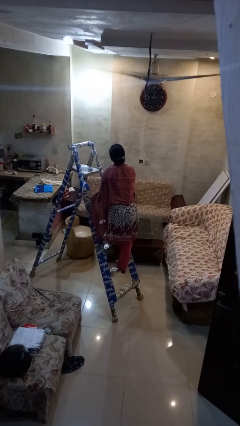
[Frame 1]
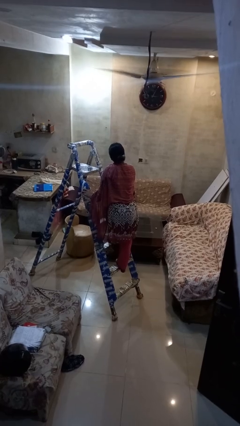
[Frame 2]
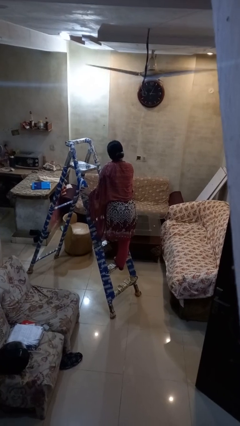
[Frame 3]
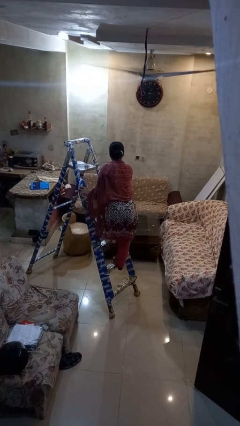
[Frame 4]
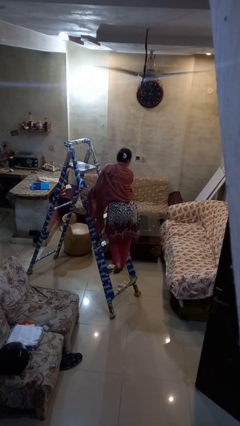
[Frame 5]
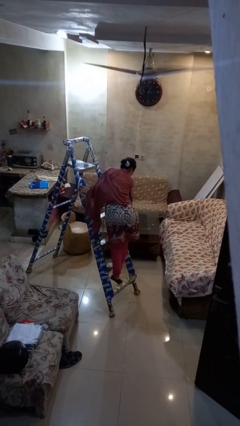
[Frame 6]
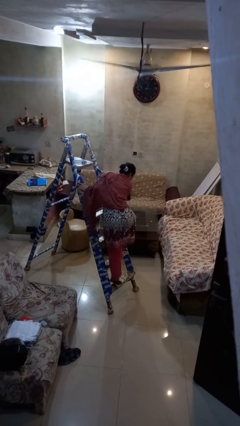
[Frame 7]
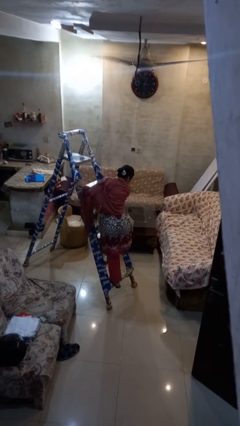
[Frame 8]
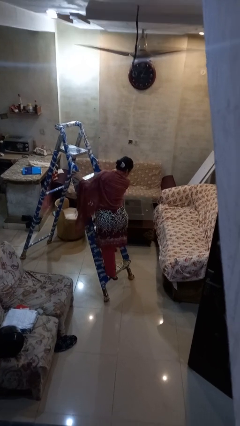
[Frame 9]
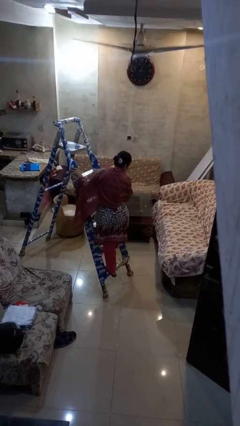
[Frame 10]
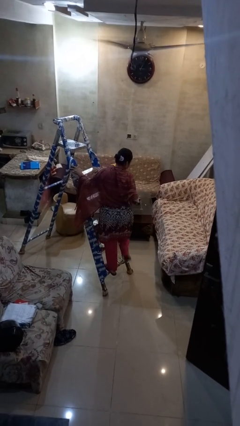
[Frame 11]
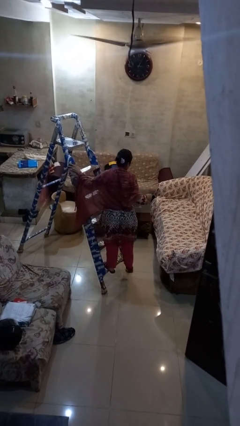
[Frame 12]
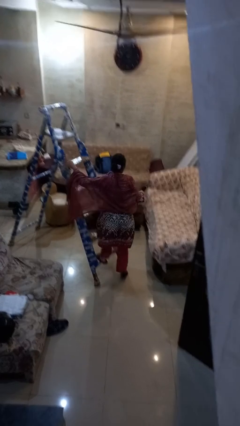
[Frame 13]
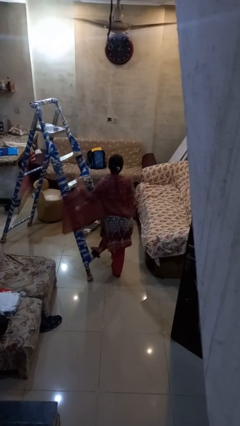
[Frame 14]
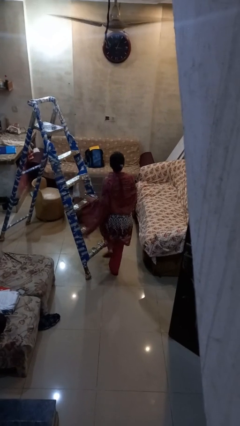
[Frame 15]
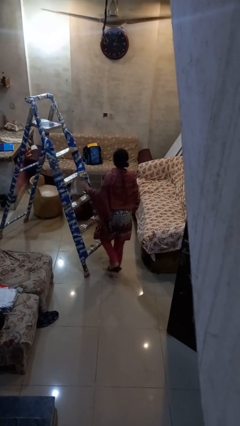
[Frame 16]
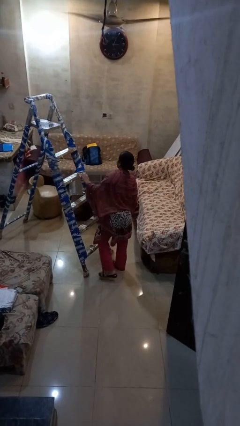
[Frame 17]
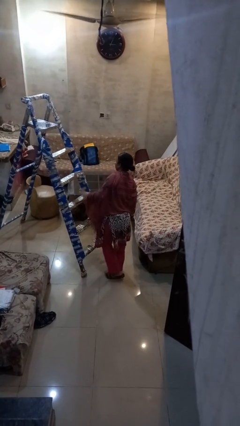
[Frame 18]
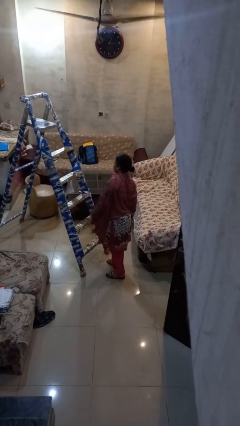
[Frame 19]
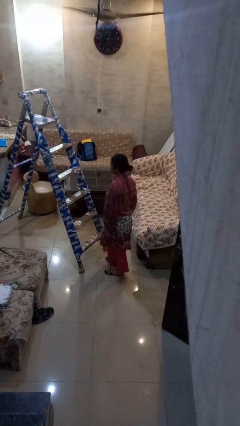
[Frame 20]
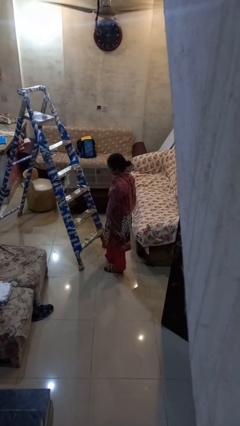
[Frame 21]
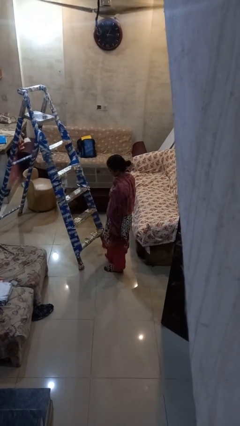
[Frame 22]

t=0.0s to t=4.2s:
person climbs down ladder

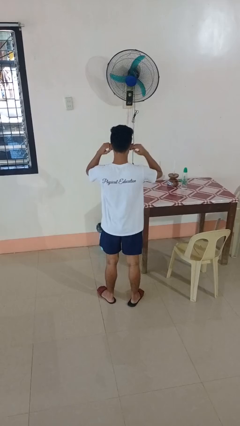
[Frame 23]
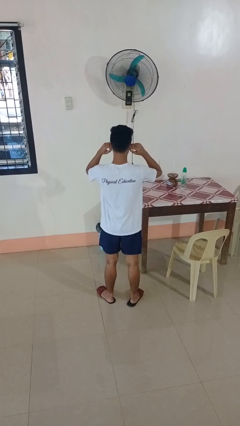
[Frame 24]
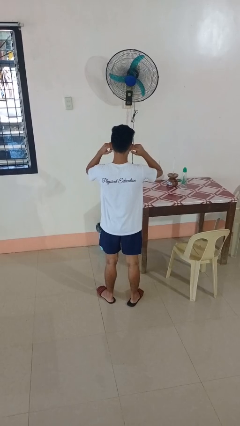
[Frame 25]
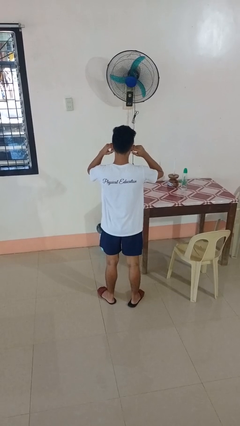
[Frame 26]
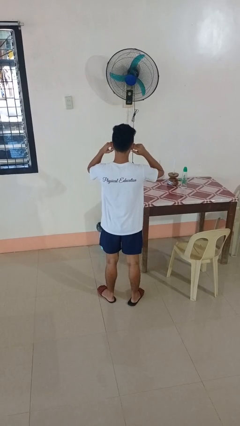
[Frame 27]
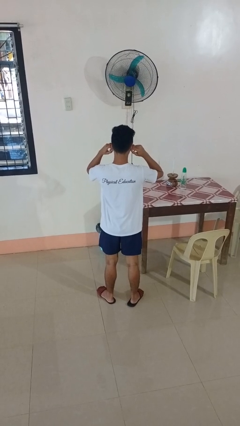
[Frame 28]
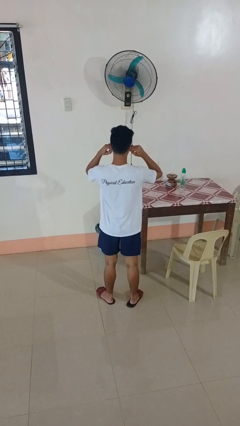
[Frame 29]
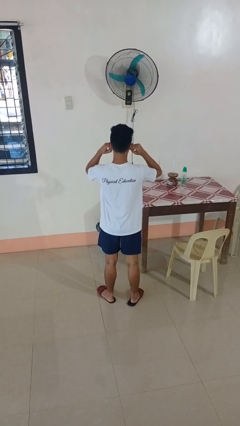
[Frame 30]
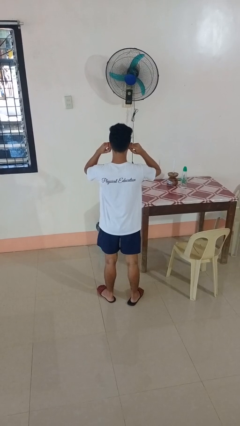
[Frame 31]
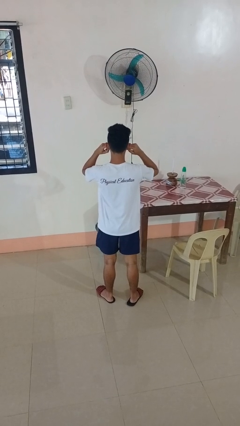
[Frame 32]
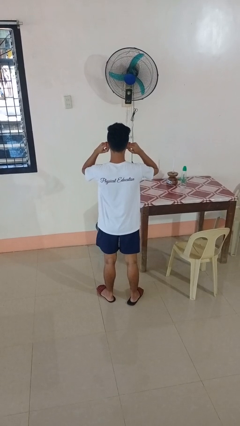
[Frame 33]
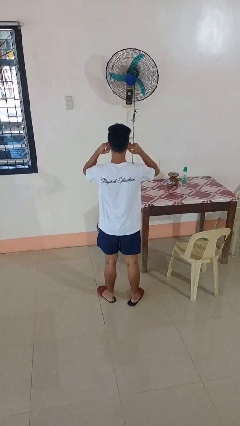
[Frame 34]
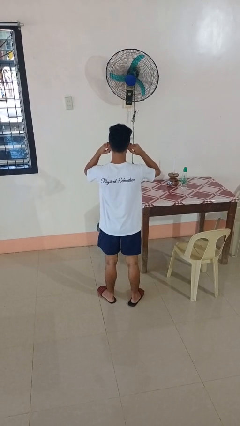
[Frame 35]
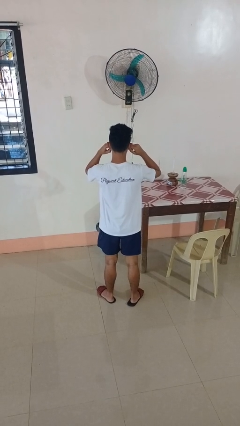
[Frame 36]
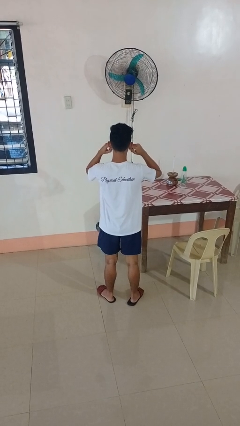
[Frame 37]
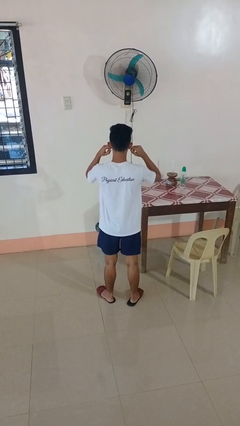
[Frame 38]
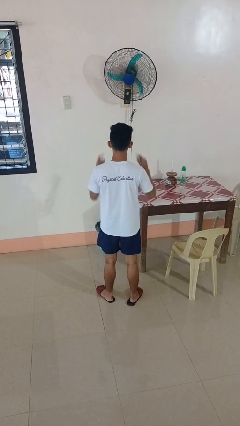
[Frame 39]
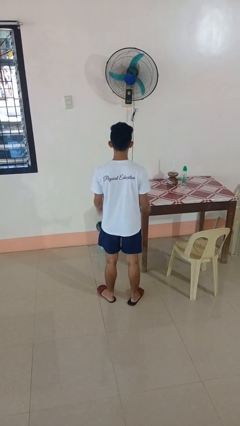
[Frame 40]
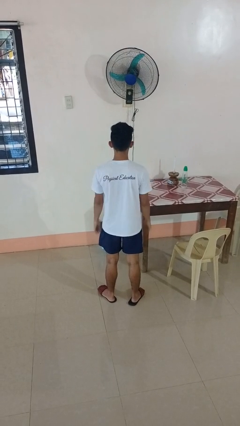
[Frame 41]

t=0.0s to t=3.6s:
person puts fingers in ear

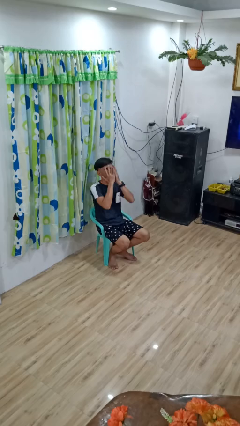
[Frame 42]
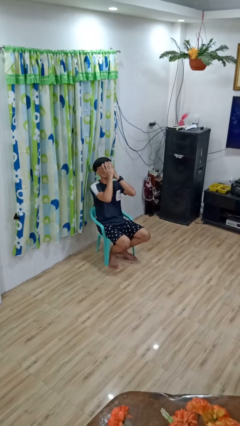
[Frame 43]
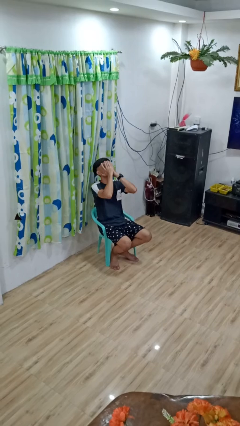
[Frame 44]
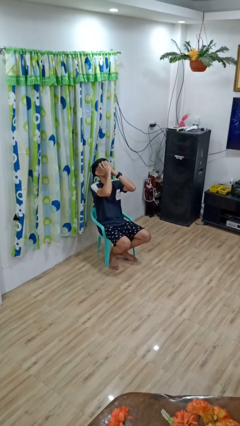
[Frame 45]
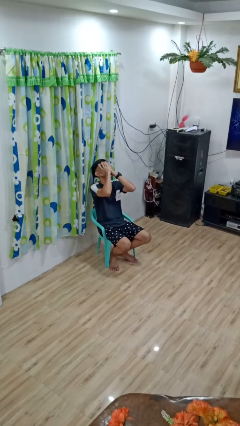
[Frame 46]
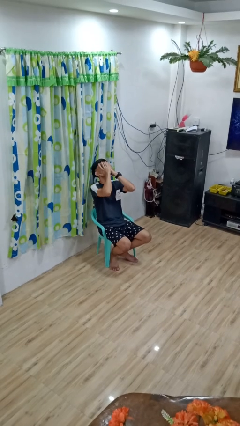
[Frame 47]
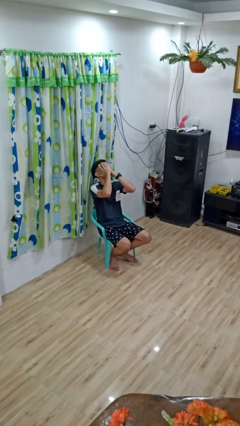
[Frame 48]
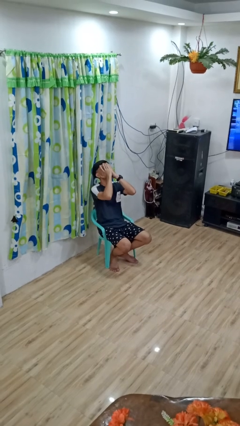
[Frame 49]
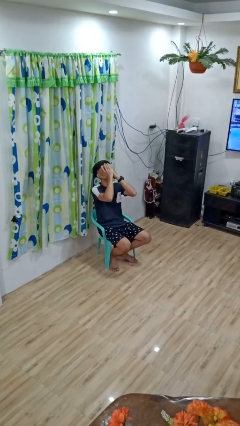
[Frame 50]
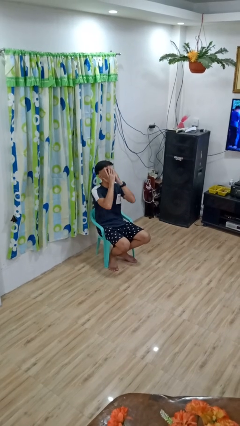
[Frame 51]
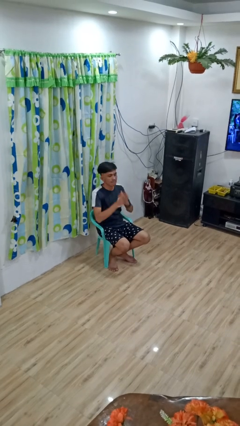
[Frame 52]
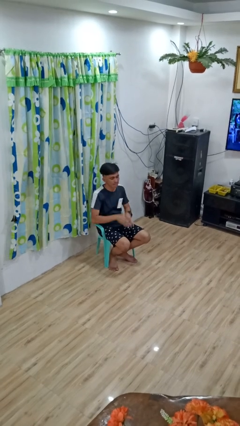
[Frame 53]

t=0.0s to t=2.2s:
person covers face with hands

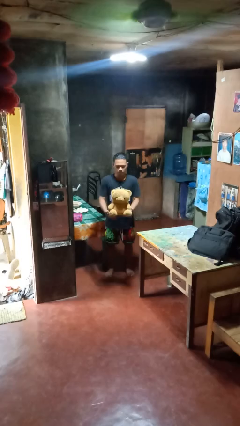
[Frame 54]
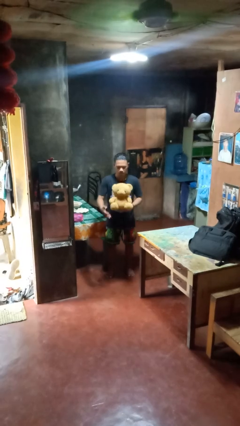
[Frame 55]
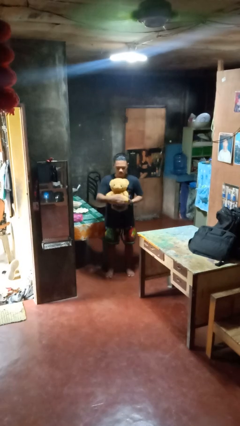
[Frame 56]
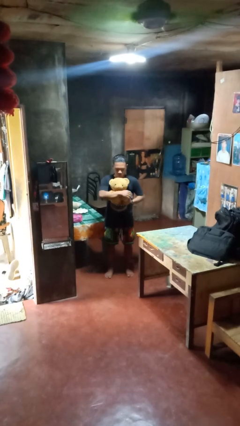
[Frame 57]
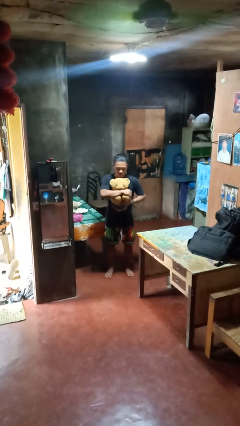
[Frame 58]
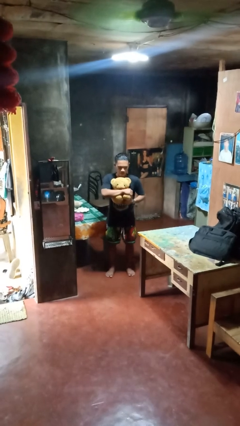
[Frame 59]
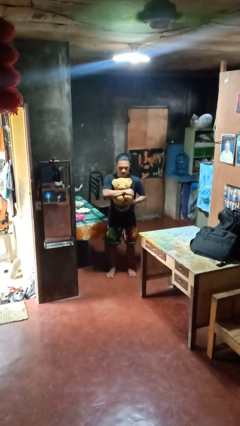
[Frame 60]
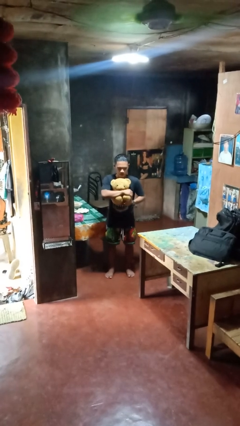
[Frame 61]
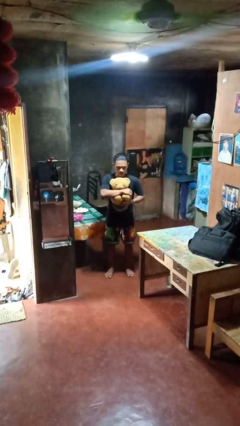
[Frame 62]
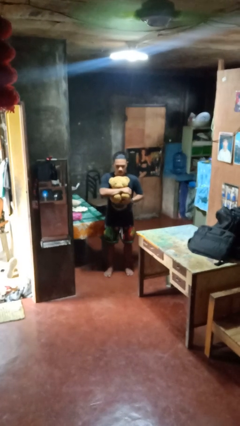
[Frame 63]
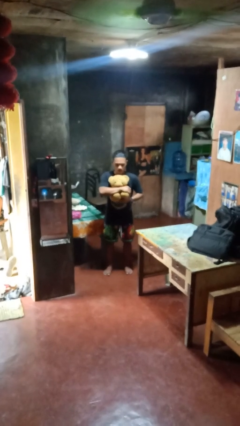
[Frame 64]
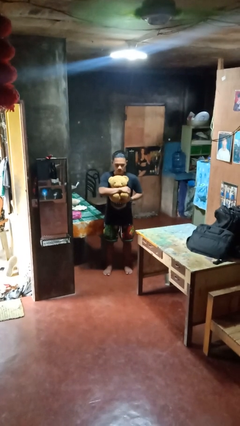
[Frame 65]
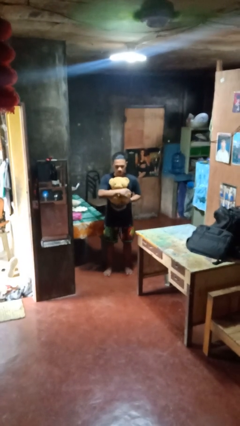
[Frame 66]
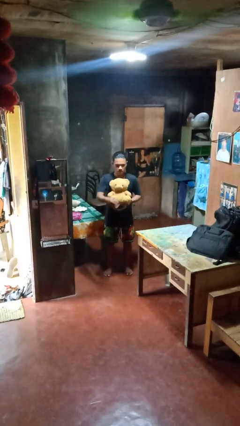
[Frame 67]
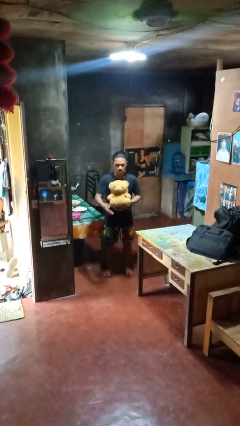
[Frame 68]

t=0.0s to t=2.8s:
person hugs stuffed animal

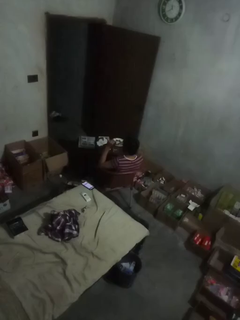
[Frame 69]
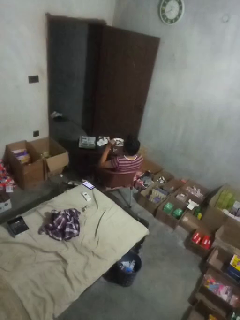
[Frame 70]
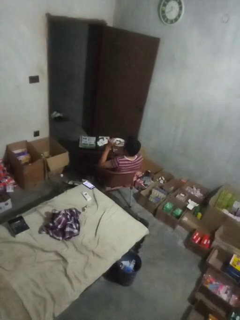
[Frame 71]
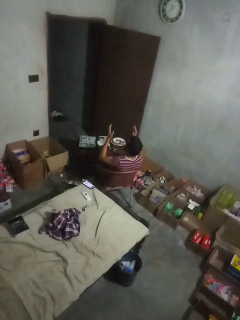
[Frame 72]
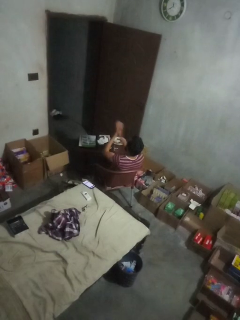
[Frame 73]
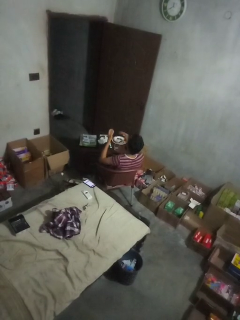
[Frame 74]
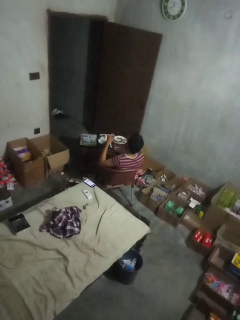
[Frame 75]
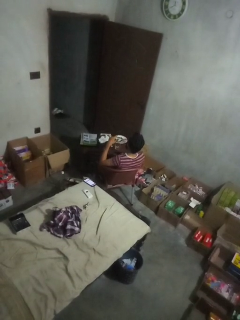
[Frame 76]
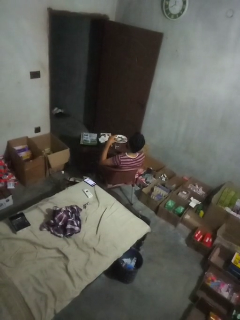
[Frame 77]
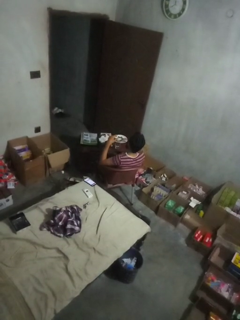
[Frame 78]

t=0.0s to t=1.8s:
person claps hands

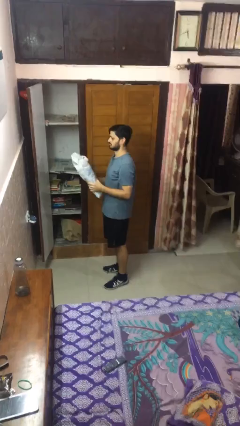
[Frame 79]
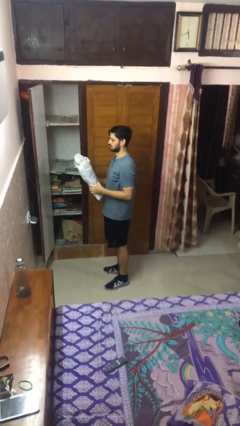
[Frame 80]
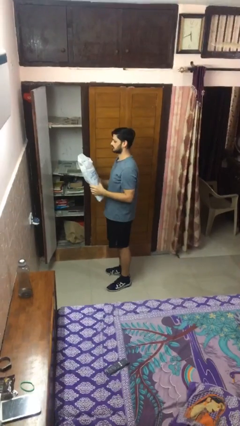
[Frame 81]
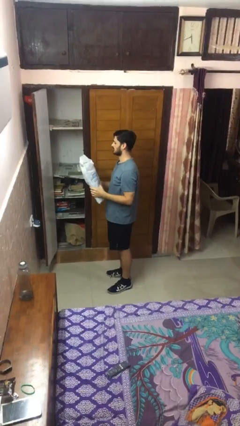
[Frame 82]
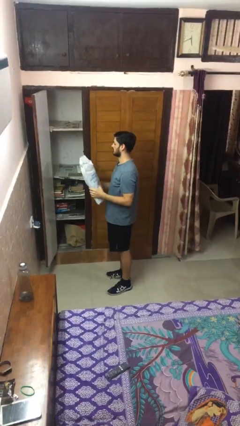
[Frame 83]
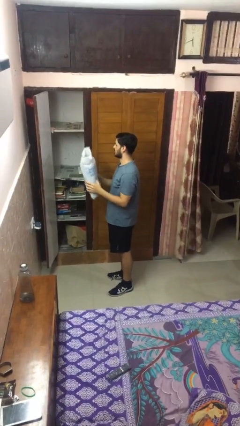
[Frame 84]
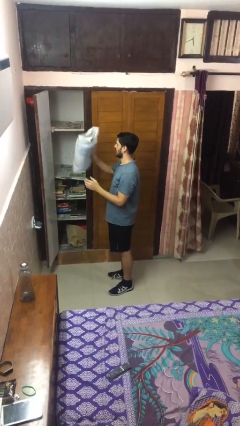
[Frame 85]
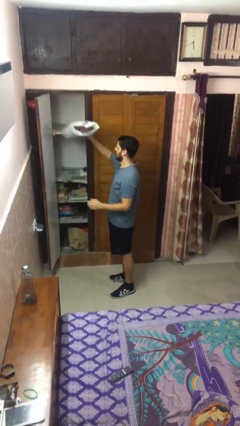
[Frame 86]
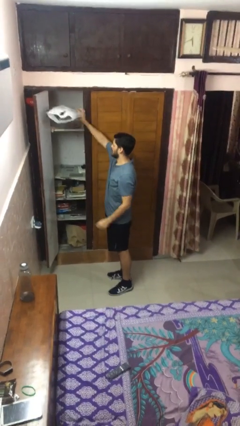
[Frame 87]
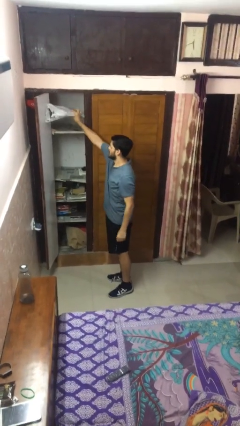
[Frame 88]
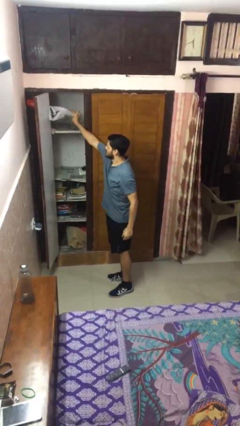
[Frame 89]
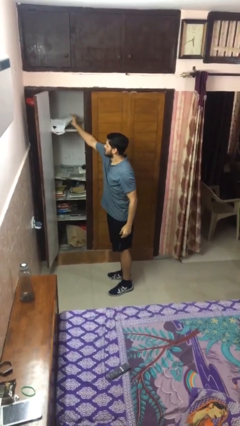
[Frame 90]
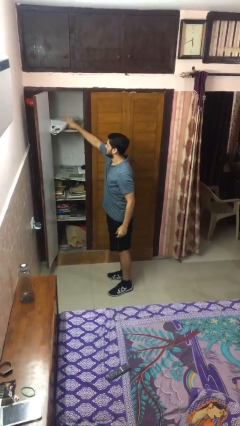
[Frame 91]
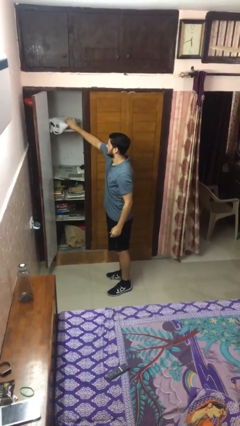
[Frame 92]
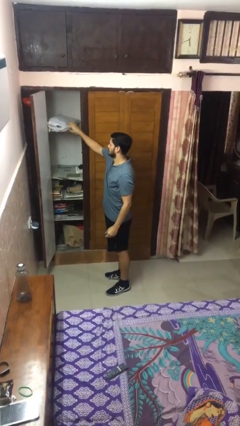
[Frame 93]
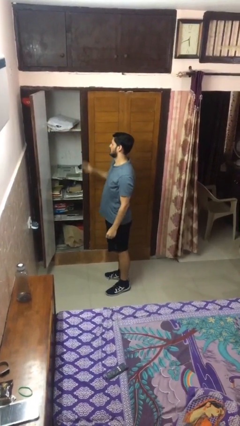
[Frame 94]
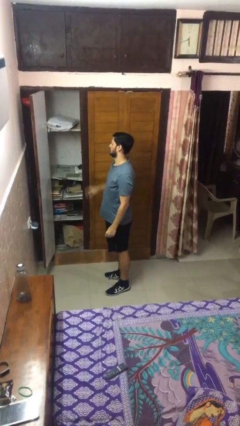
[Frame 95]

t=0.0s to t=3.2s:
person puts down object on shelf

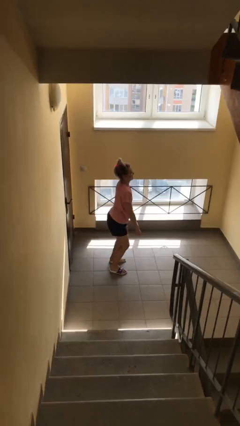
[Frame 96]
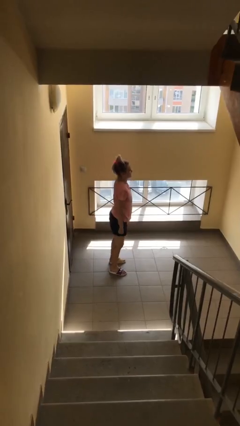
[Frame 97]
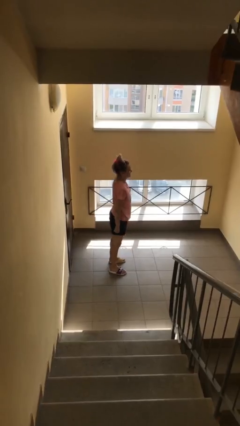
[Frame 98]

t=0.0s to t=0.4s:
person stands up

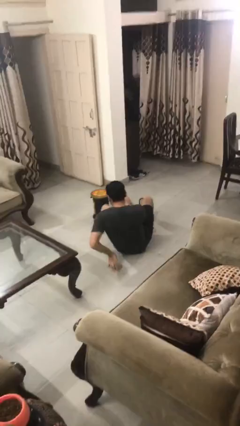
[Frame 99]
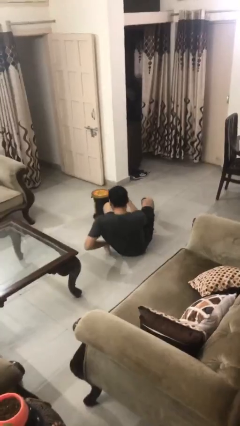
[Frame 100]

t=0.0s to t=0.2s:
person lies down on floor
